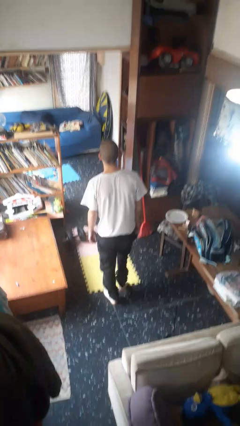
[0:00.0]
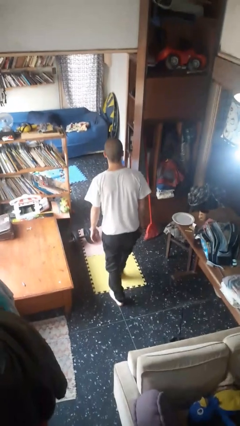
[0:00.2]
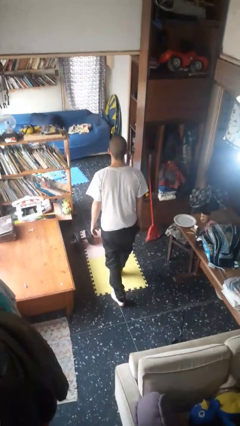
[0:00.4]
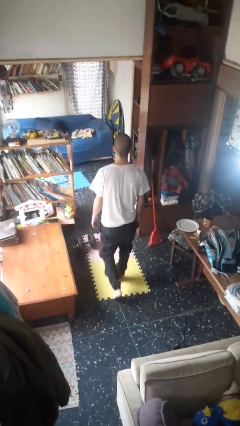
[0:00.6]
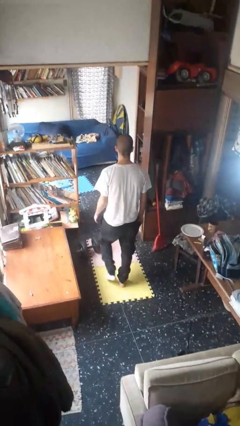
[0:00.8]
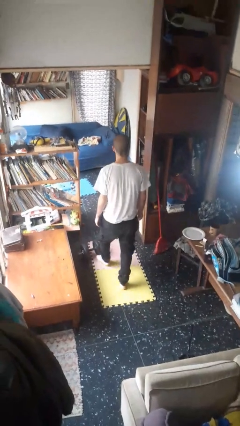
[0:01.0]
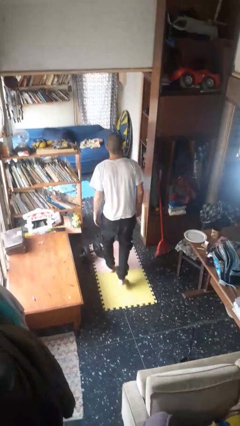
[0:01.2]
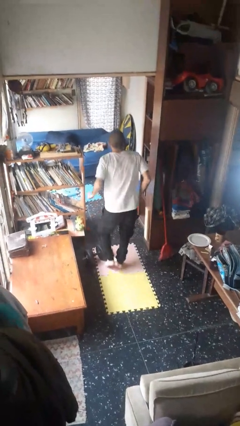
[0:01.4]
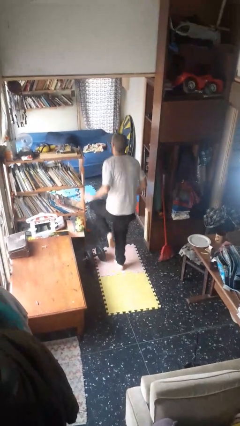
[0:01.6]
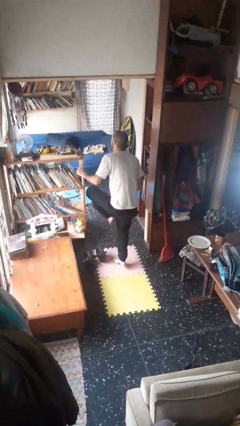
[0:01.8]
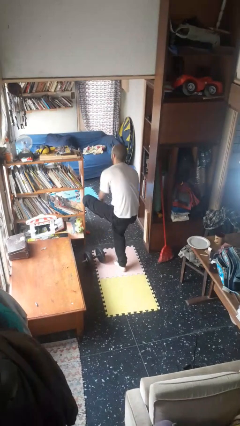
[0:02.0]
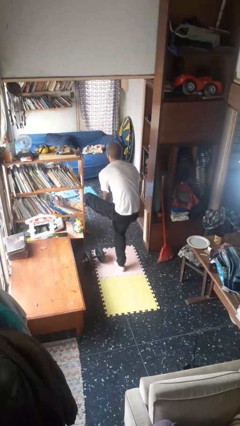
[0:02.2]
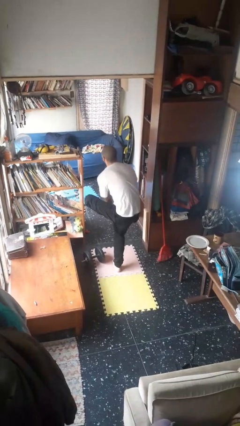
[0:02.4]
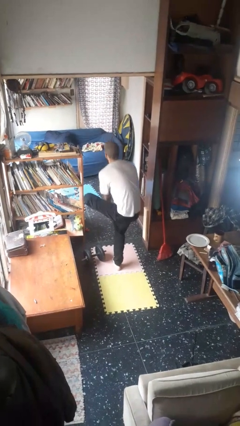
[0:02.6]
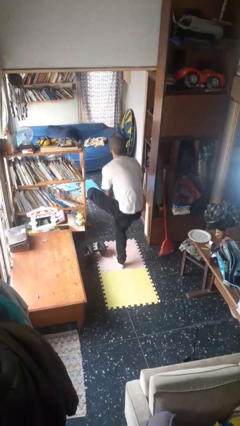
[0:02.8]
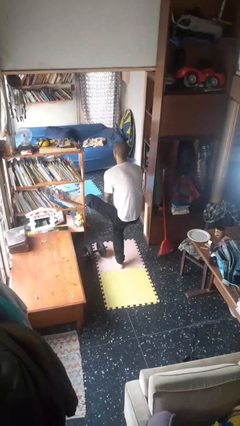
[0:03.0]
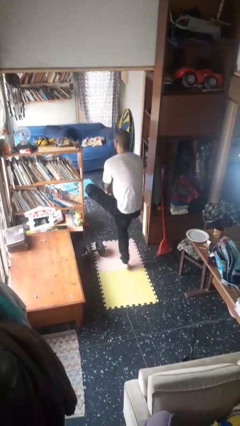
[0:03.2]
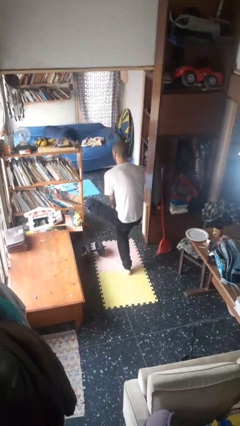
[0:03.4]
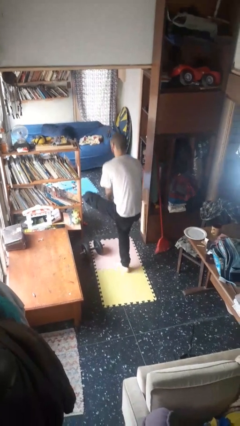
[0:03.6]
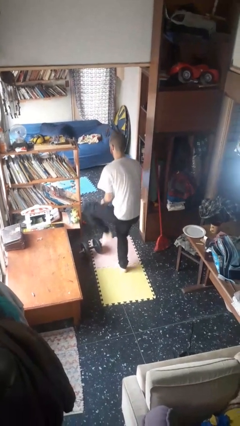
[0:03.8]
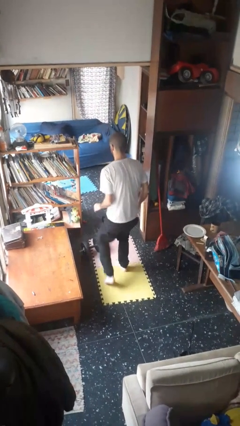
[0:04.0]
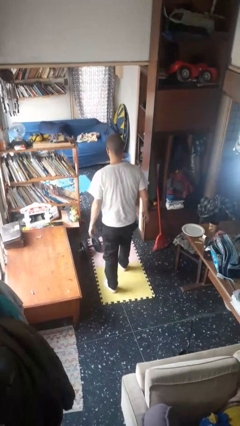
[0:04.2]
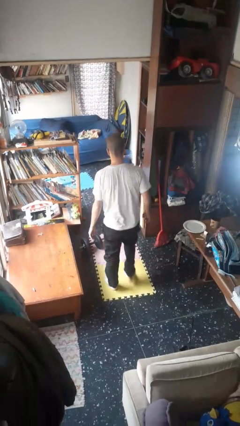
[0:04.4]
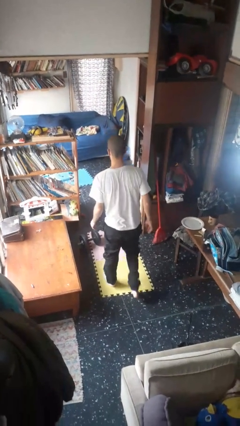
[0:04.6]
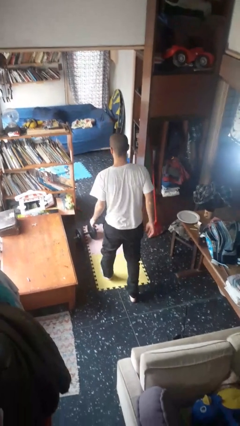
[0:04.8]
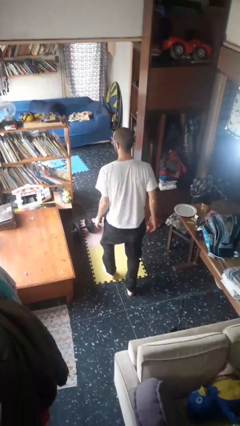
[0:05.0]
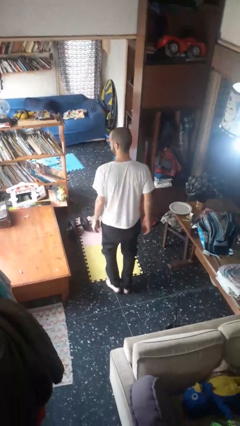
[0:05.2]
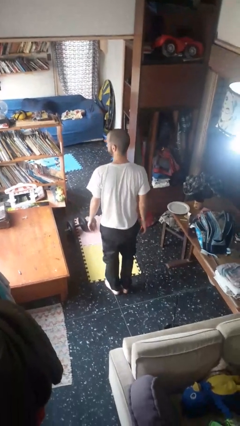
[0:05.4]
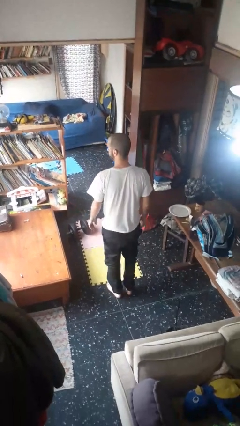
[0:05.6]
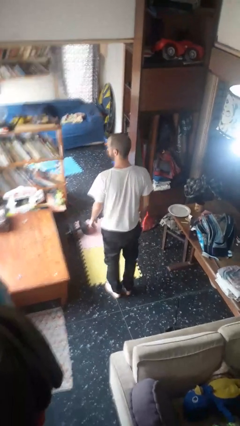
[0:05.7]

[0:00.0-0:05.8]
person stubs toe

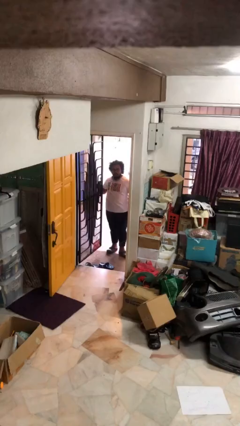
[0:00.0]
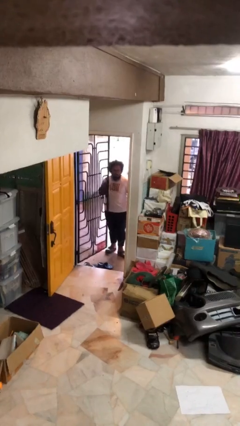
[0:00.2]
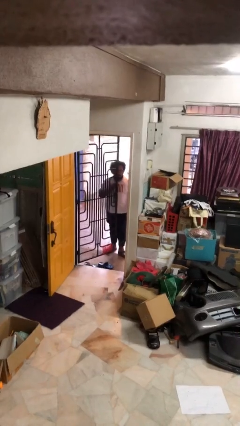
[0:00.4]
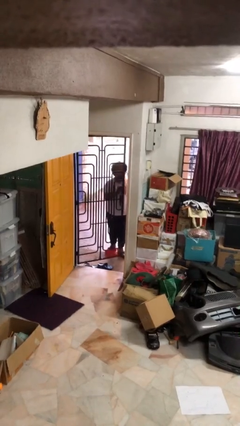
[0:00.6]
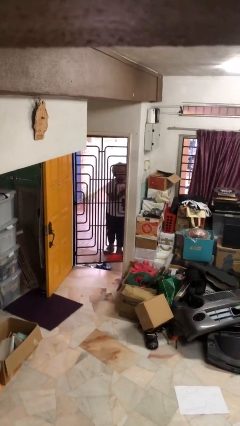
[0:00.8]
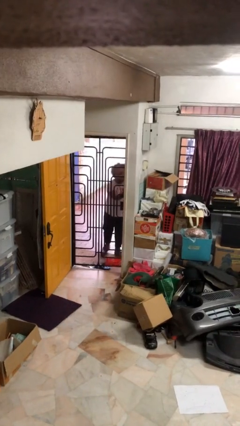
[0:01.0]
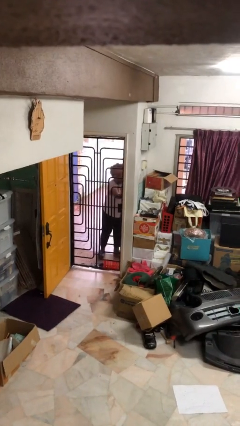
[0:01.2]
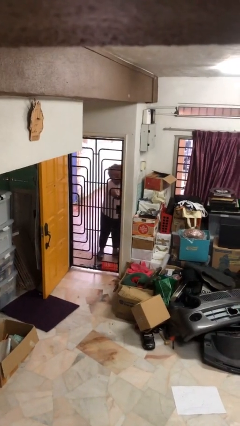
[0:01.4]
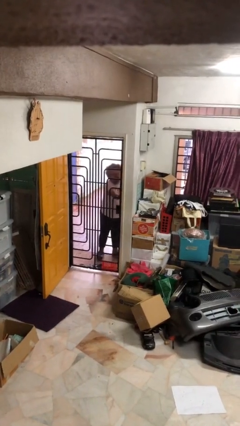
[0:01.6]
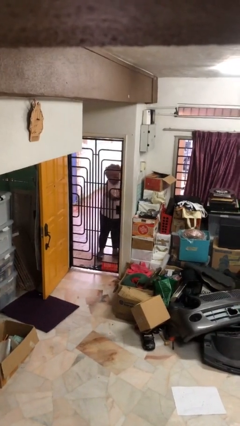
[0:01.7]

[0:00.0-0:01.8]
person closes facility door

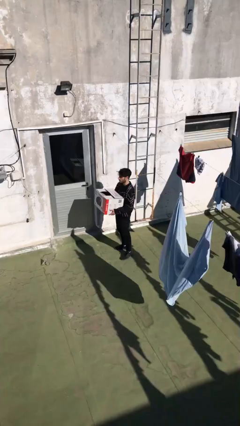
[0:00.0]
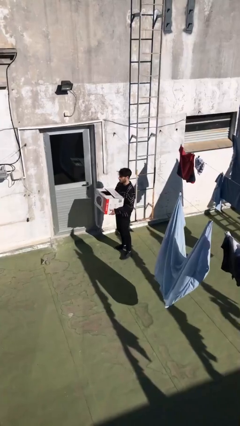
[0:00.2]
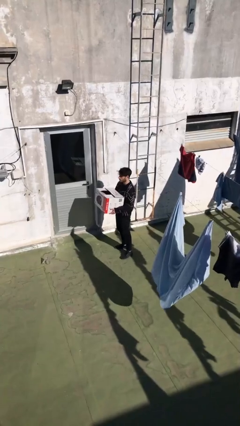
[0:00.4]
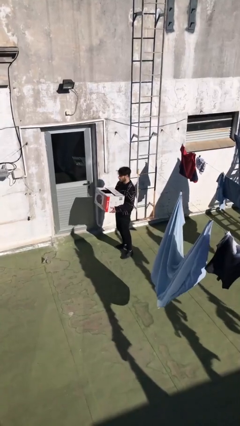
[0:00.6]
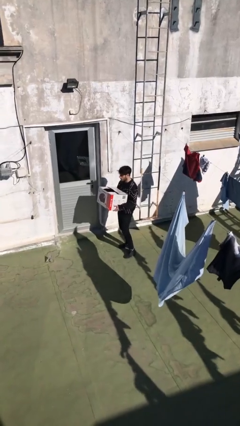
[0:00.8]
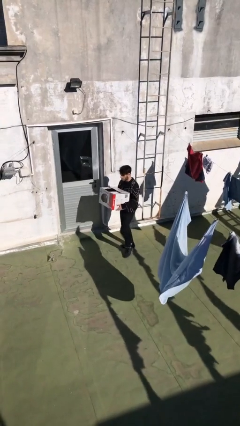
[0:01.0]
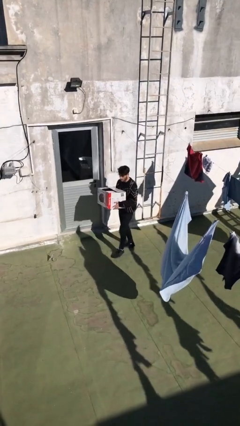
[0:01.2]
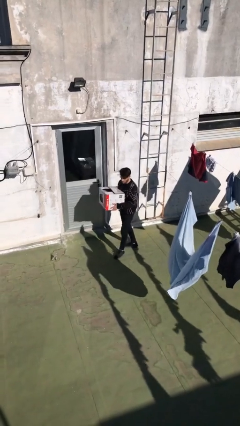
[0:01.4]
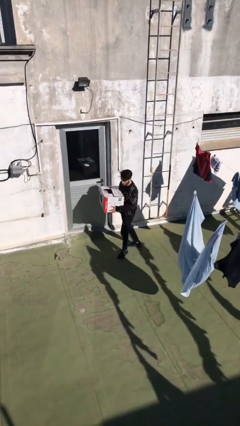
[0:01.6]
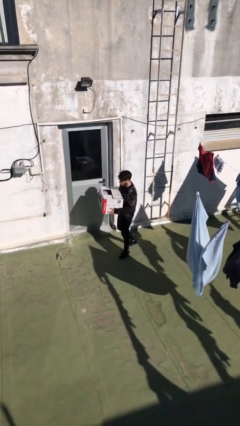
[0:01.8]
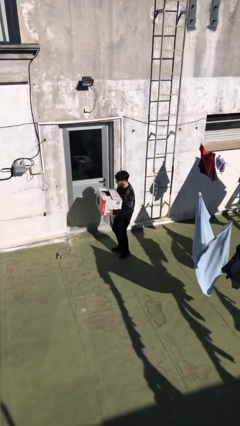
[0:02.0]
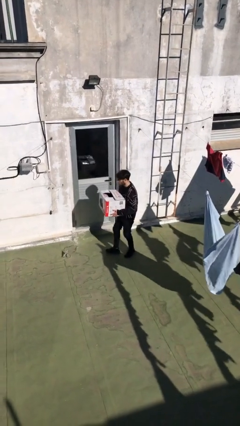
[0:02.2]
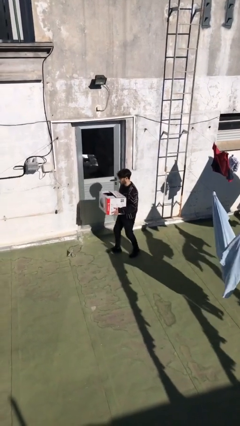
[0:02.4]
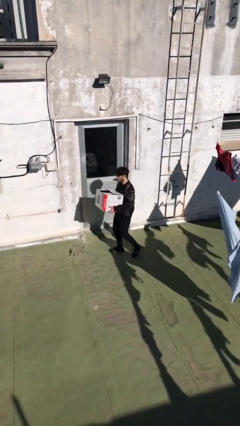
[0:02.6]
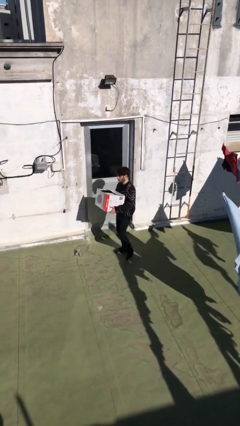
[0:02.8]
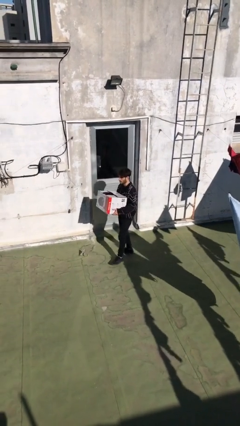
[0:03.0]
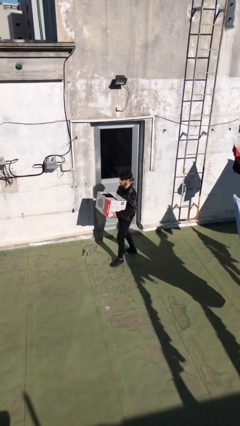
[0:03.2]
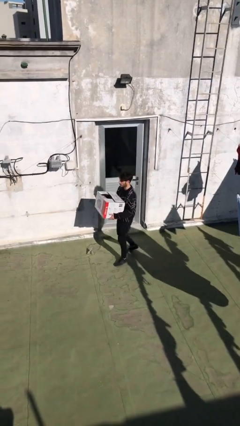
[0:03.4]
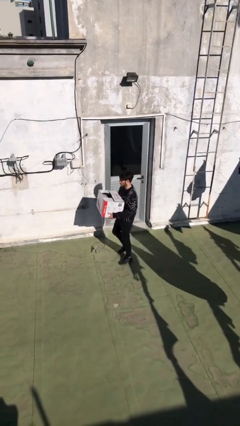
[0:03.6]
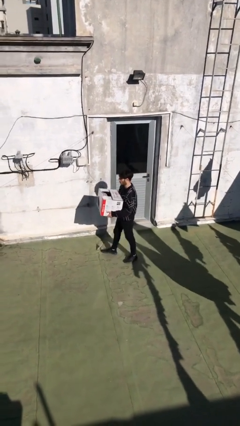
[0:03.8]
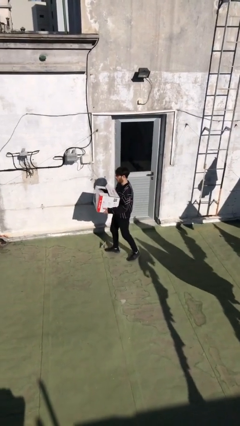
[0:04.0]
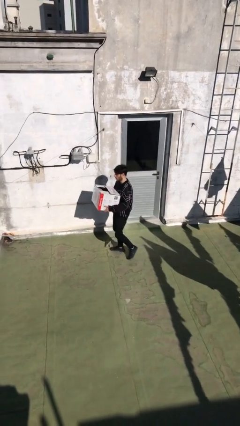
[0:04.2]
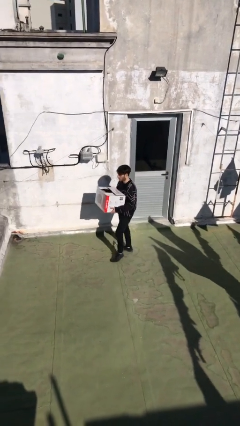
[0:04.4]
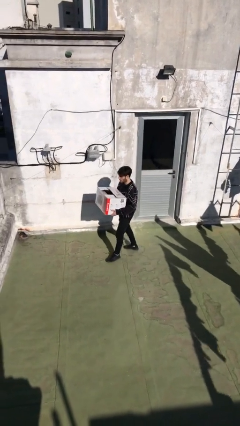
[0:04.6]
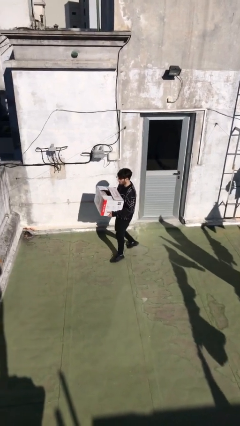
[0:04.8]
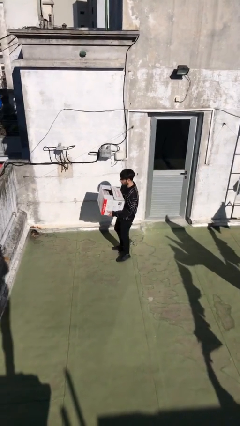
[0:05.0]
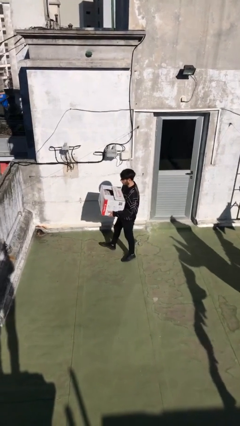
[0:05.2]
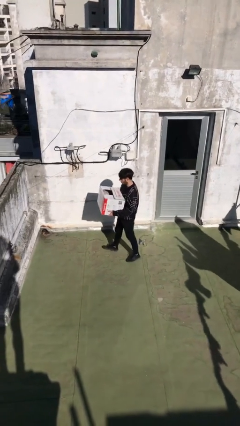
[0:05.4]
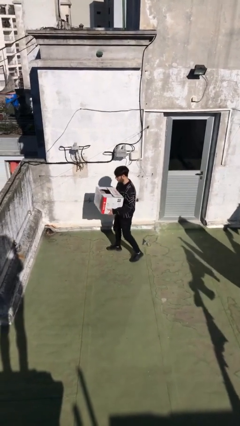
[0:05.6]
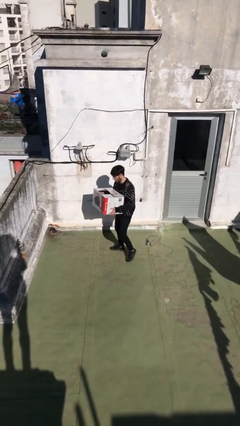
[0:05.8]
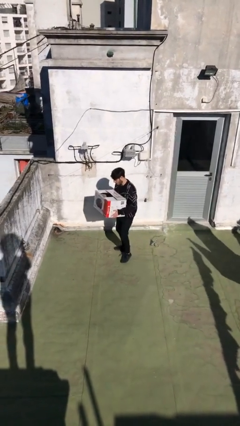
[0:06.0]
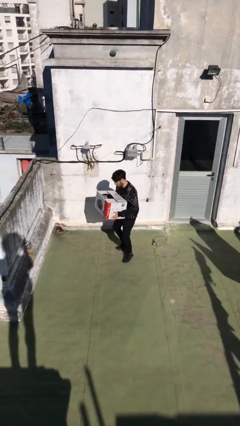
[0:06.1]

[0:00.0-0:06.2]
person carries heavy object

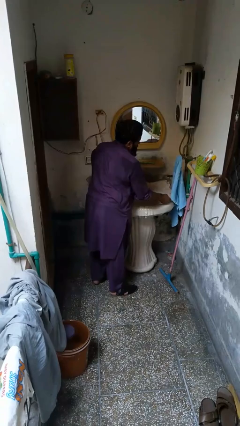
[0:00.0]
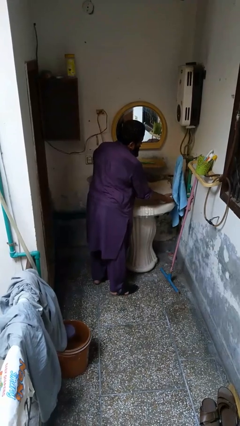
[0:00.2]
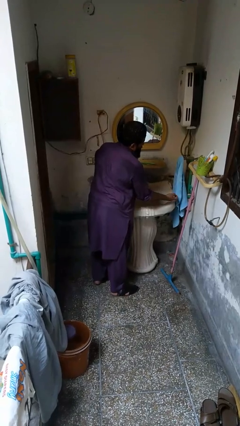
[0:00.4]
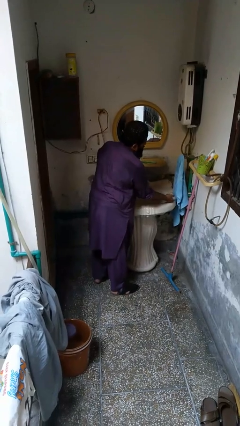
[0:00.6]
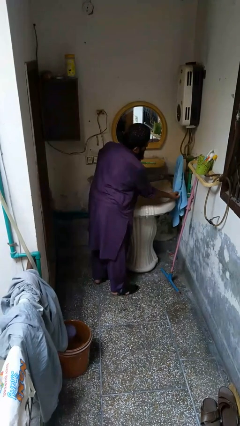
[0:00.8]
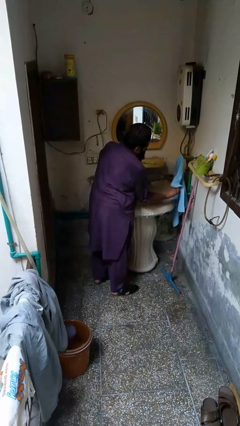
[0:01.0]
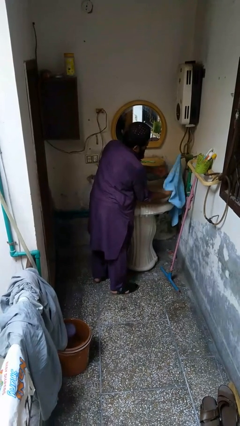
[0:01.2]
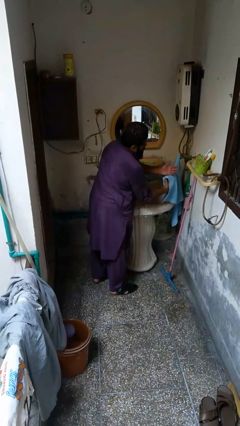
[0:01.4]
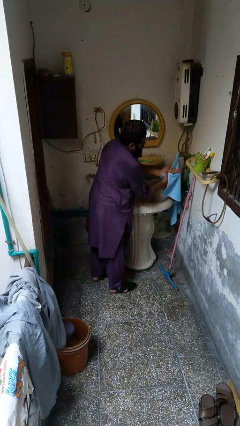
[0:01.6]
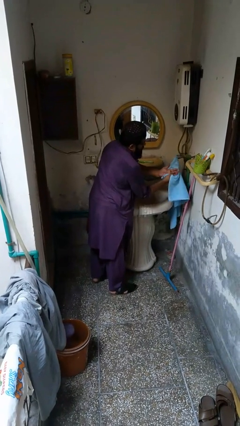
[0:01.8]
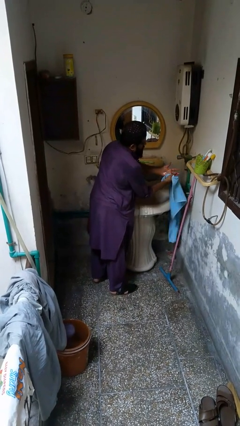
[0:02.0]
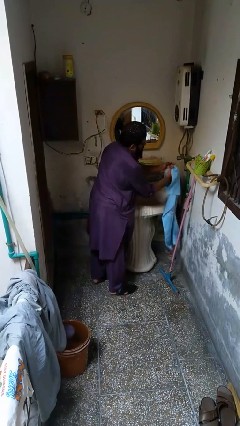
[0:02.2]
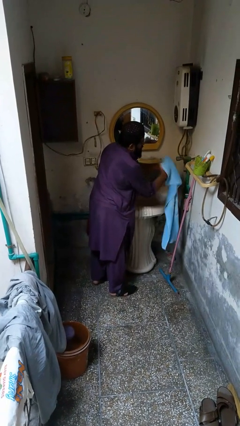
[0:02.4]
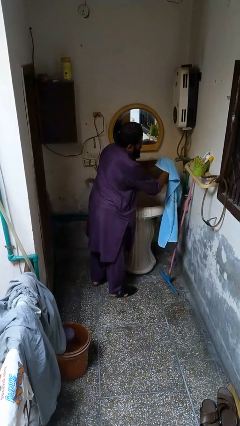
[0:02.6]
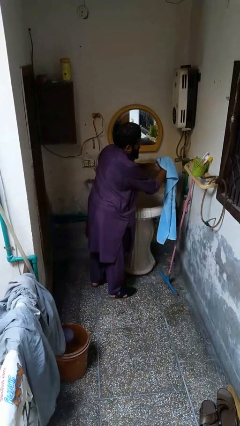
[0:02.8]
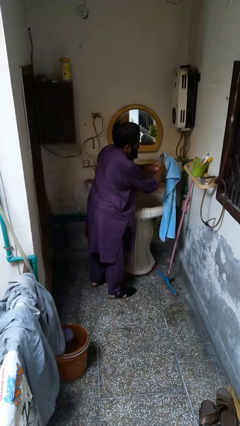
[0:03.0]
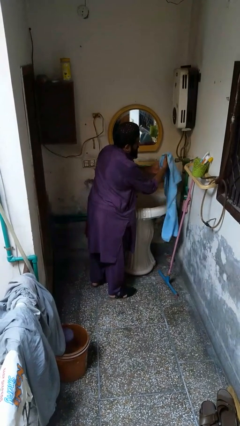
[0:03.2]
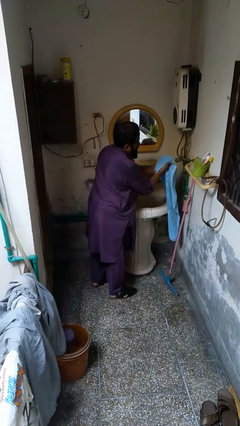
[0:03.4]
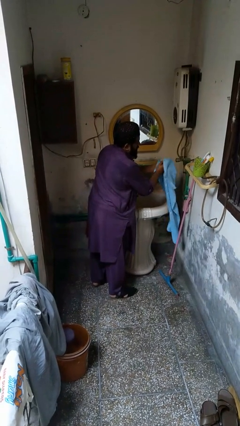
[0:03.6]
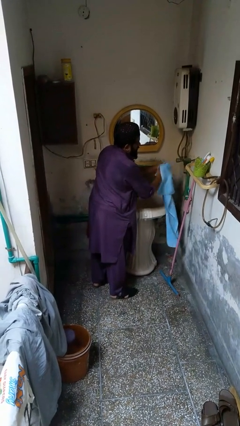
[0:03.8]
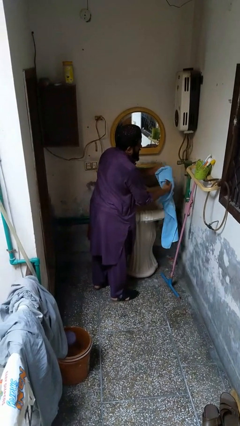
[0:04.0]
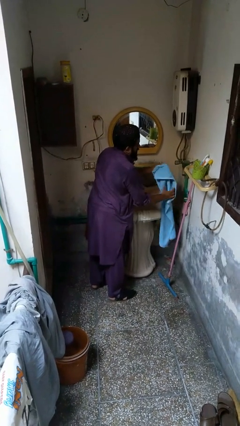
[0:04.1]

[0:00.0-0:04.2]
person dries hands with towel
